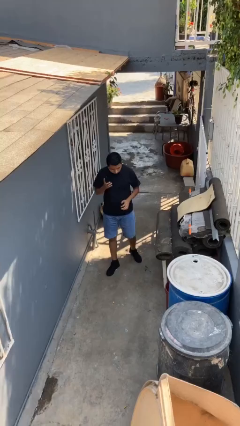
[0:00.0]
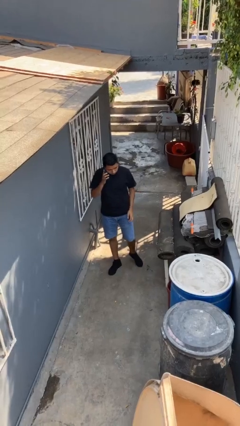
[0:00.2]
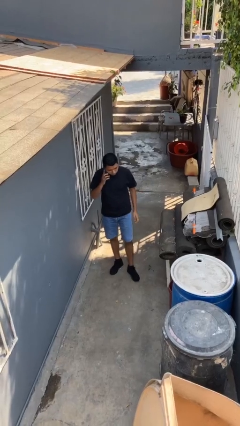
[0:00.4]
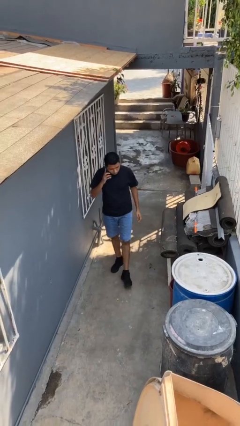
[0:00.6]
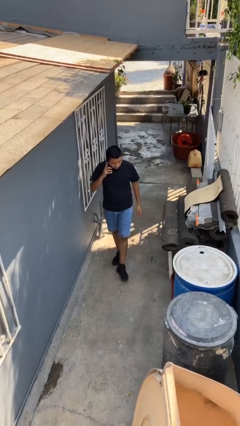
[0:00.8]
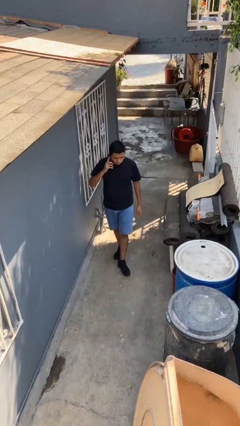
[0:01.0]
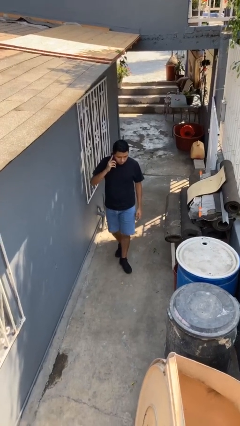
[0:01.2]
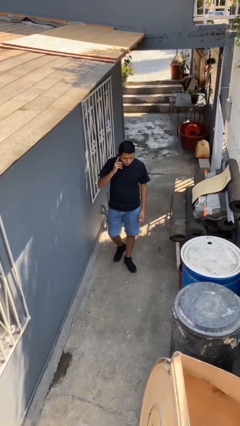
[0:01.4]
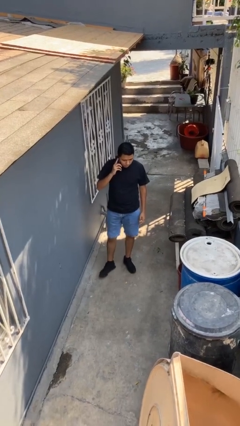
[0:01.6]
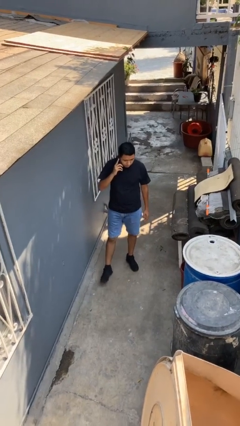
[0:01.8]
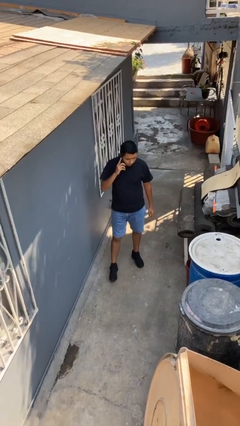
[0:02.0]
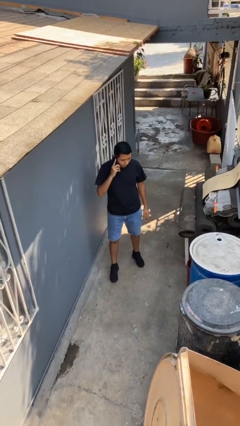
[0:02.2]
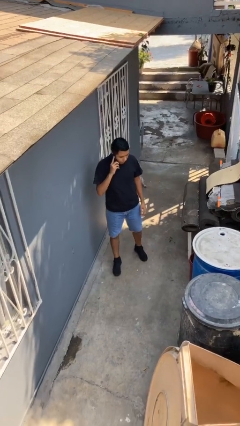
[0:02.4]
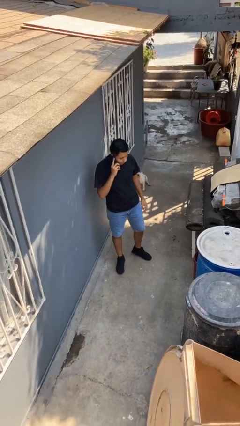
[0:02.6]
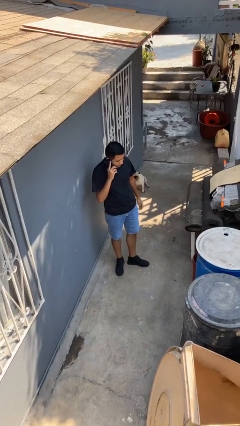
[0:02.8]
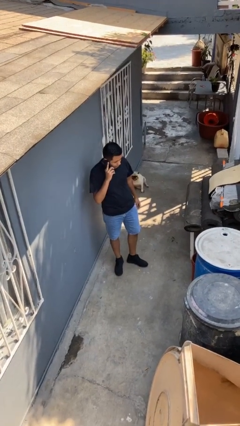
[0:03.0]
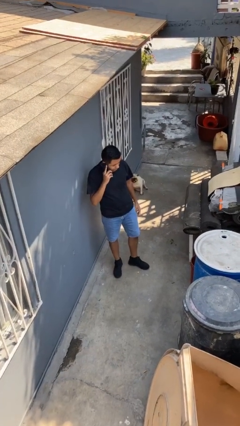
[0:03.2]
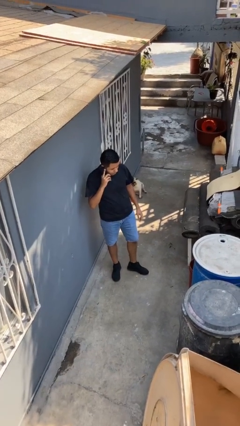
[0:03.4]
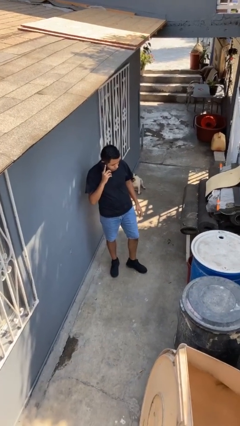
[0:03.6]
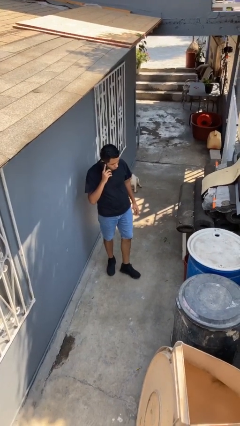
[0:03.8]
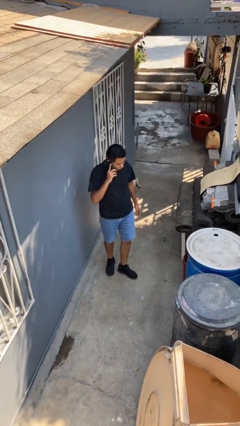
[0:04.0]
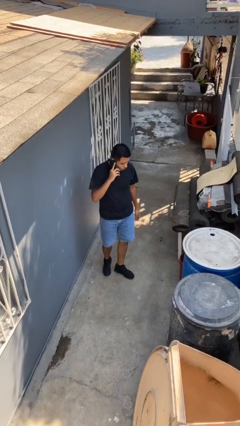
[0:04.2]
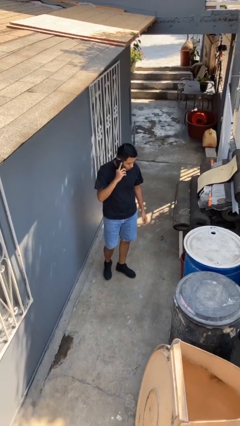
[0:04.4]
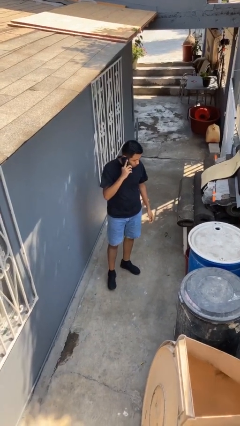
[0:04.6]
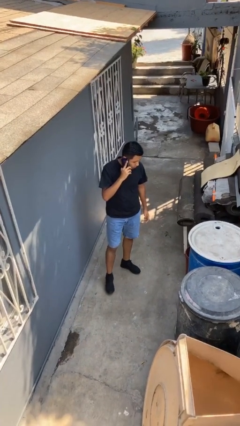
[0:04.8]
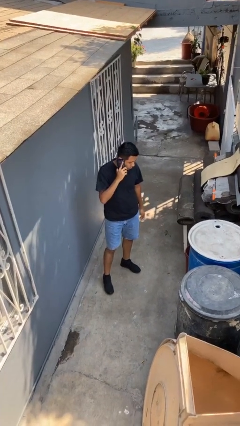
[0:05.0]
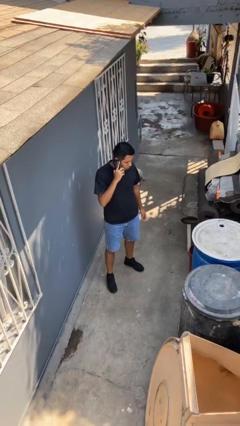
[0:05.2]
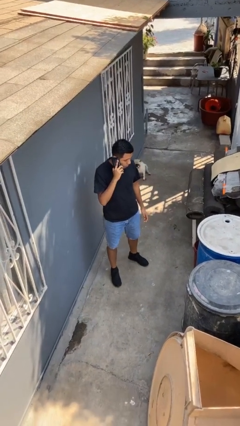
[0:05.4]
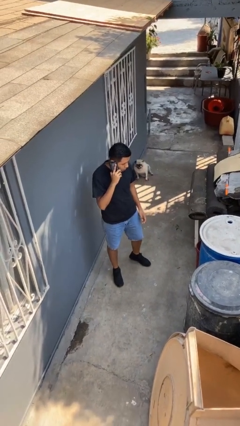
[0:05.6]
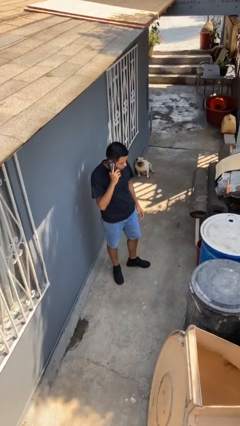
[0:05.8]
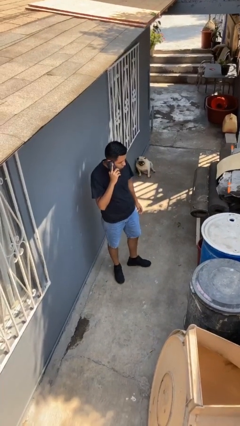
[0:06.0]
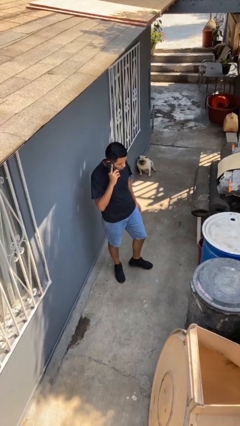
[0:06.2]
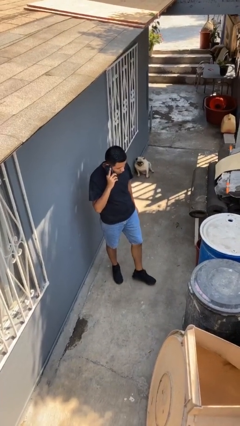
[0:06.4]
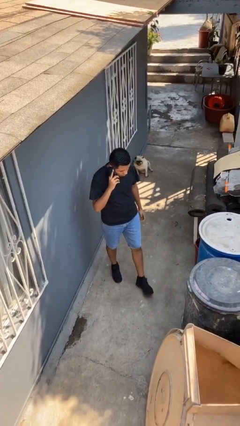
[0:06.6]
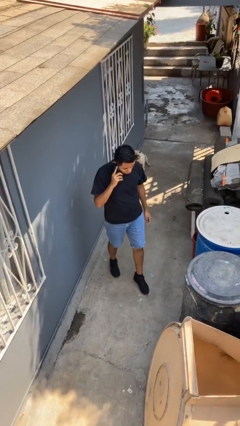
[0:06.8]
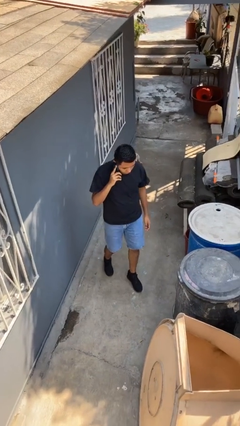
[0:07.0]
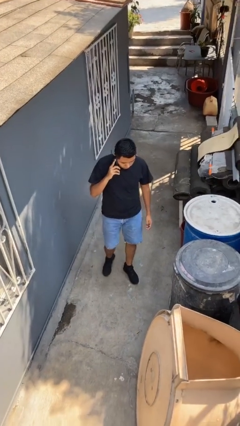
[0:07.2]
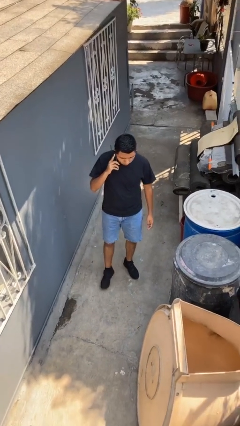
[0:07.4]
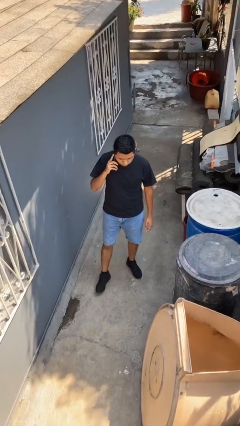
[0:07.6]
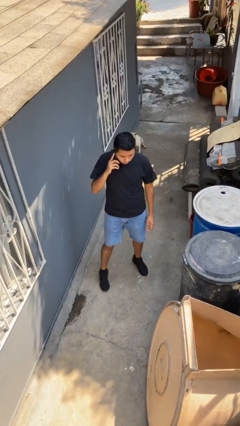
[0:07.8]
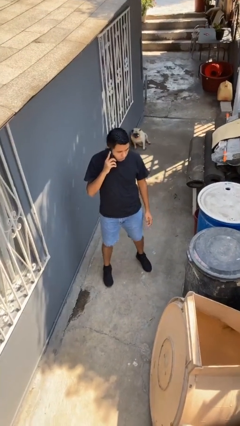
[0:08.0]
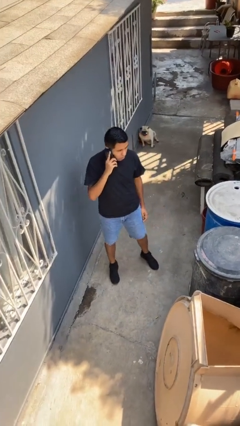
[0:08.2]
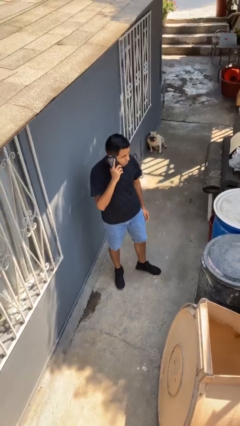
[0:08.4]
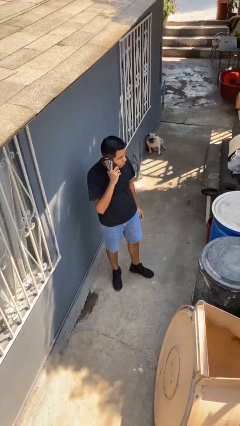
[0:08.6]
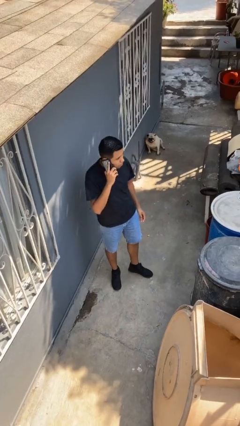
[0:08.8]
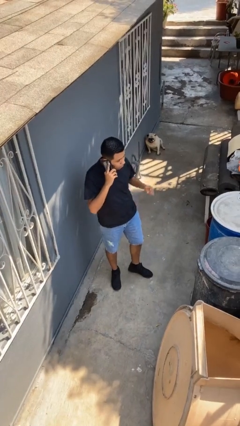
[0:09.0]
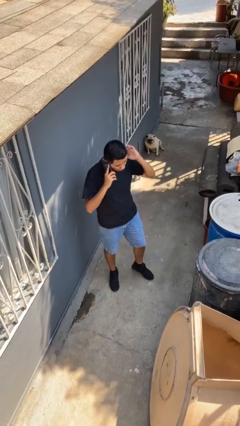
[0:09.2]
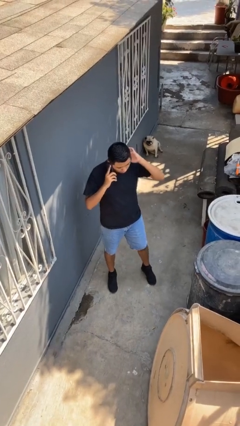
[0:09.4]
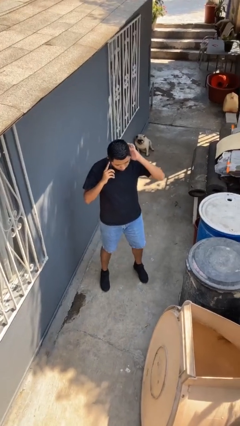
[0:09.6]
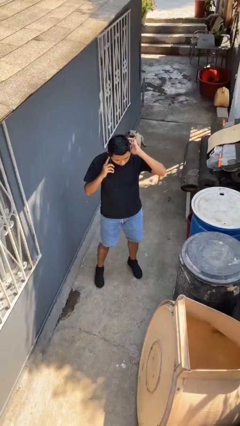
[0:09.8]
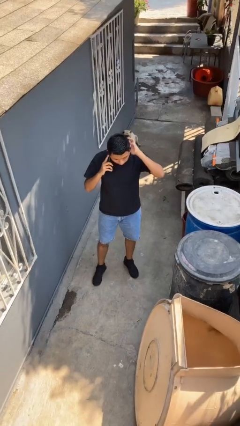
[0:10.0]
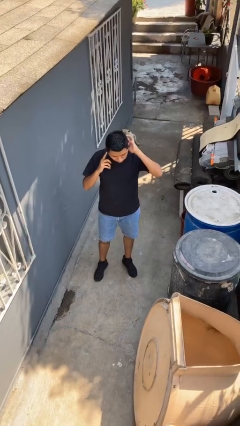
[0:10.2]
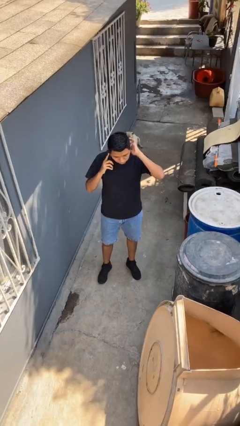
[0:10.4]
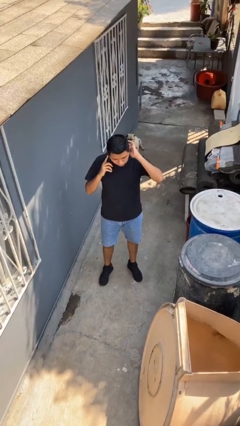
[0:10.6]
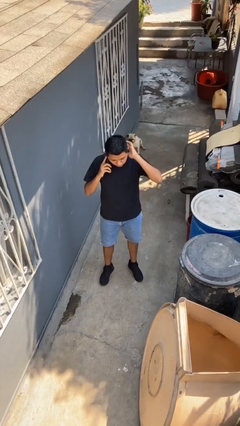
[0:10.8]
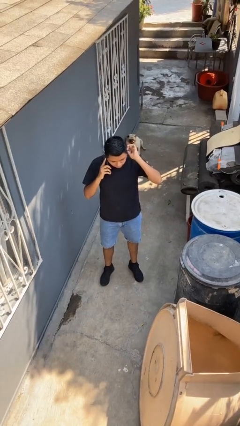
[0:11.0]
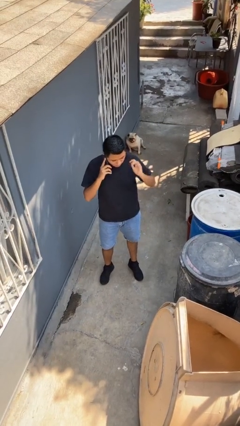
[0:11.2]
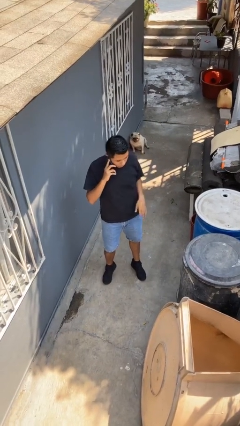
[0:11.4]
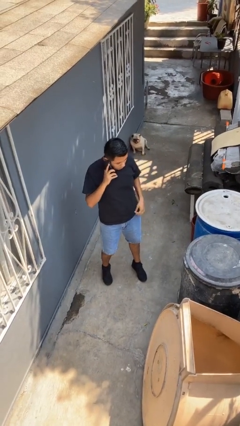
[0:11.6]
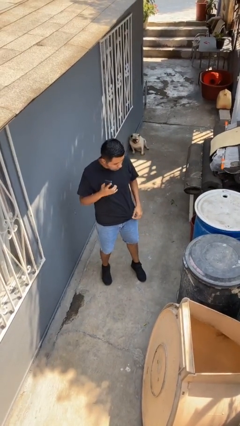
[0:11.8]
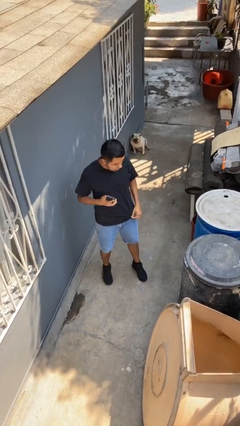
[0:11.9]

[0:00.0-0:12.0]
person talks on phone

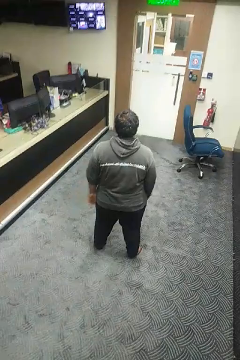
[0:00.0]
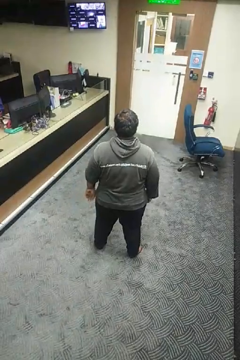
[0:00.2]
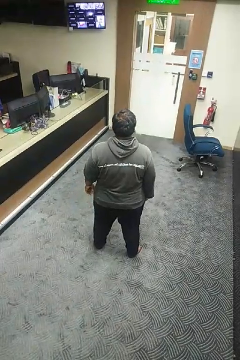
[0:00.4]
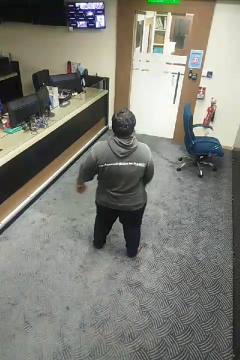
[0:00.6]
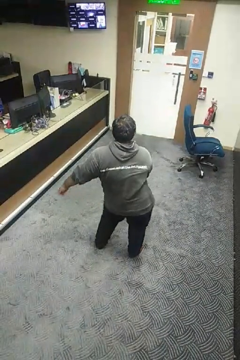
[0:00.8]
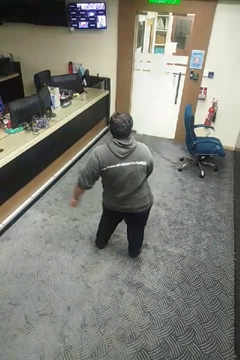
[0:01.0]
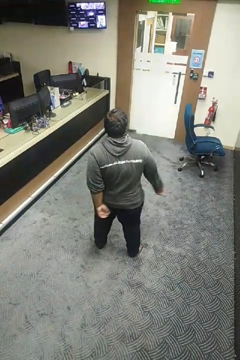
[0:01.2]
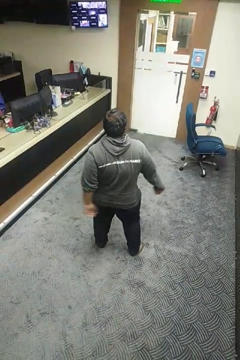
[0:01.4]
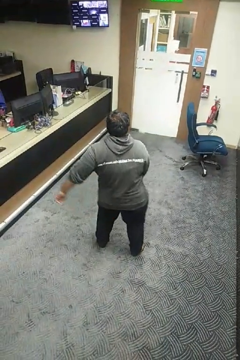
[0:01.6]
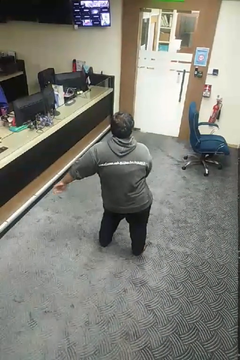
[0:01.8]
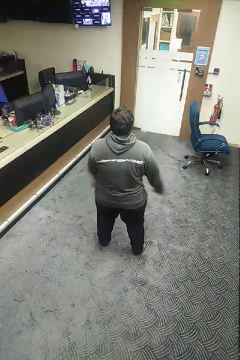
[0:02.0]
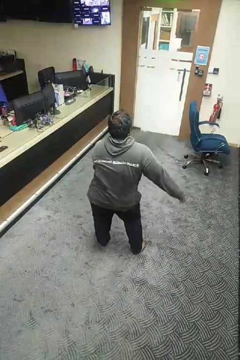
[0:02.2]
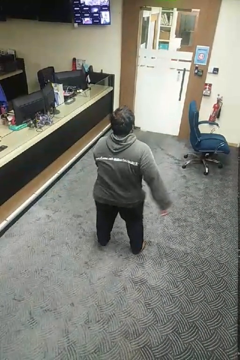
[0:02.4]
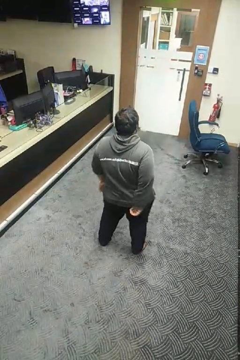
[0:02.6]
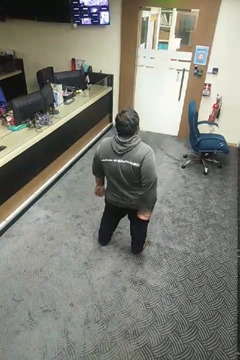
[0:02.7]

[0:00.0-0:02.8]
person dances in place

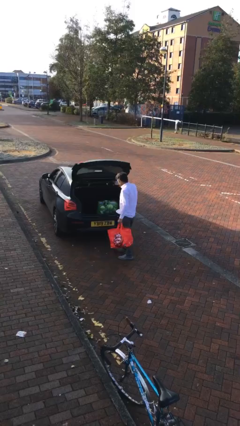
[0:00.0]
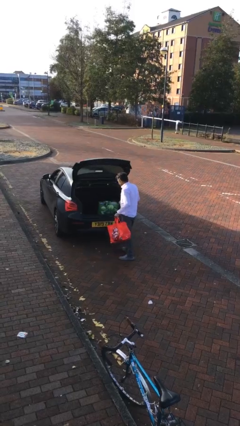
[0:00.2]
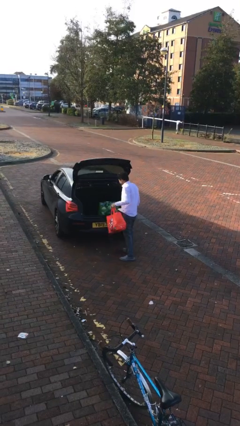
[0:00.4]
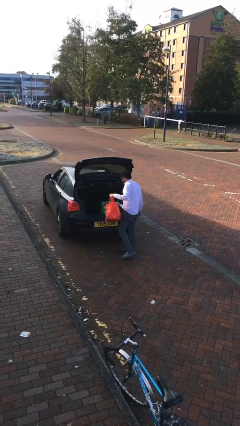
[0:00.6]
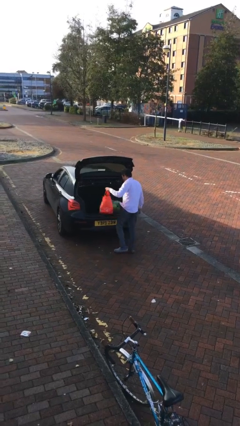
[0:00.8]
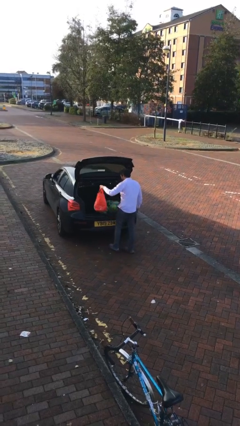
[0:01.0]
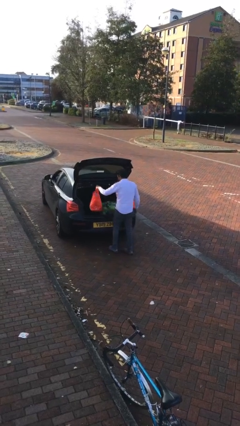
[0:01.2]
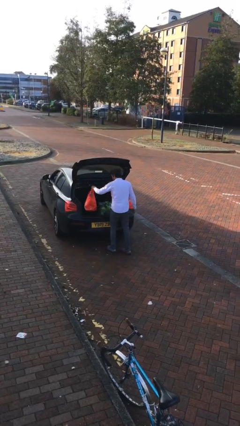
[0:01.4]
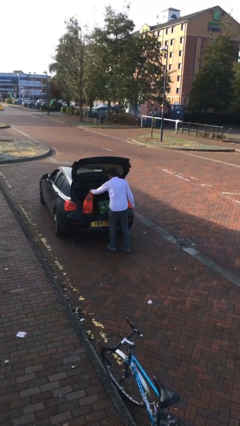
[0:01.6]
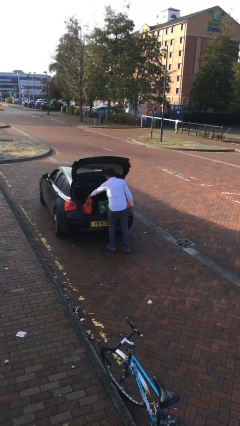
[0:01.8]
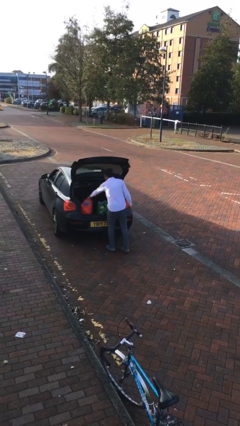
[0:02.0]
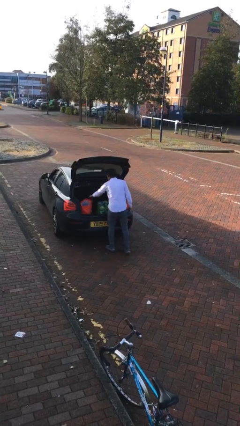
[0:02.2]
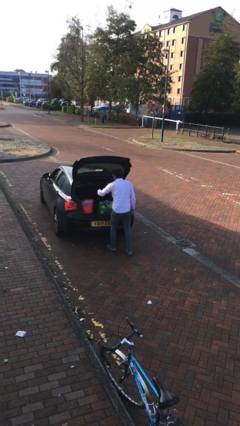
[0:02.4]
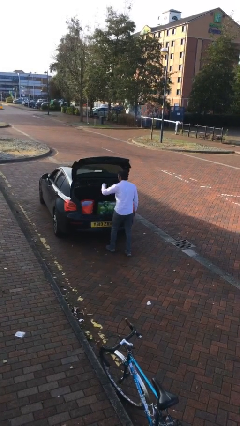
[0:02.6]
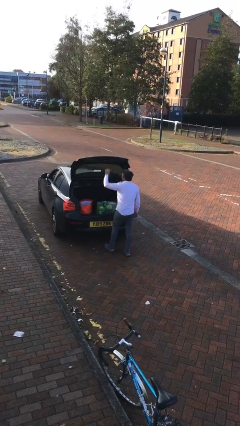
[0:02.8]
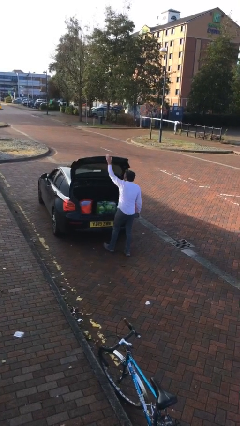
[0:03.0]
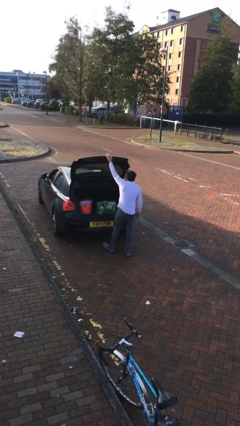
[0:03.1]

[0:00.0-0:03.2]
person loads car

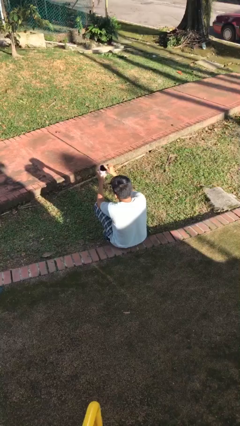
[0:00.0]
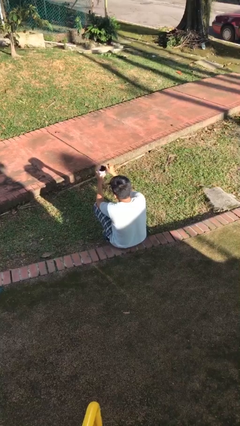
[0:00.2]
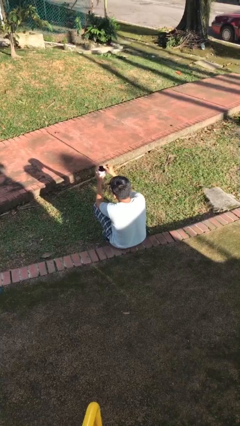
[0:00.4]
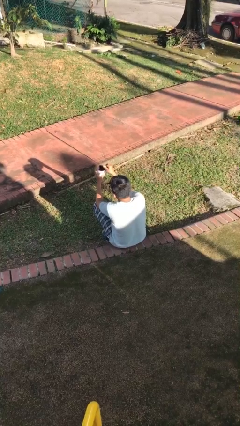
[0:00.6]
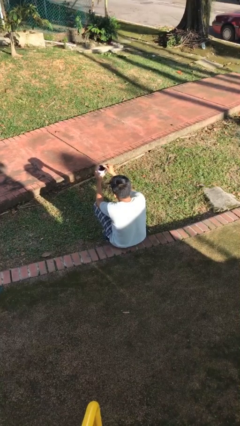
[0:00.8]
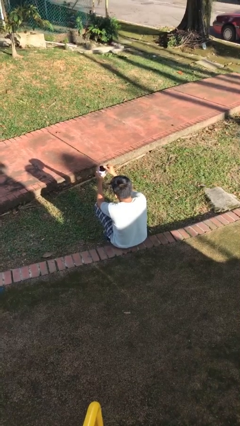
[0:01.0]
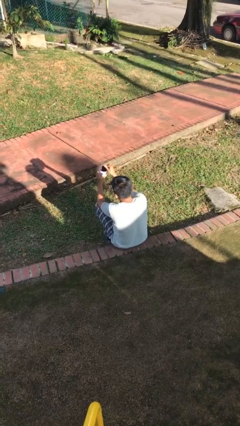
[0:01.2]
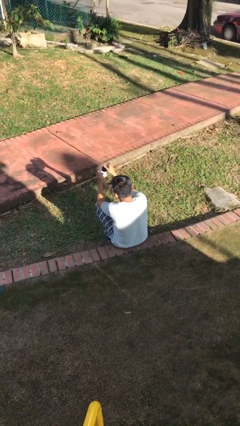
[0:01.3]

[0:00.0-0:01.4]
person stirs mug
